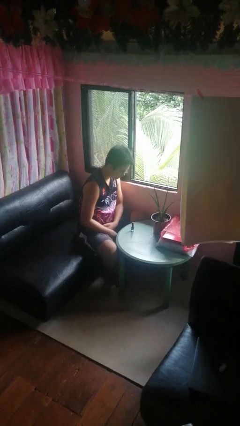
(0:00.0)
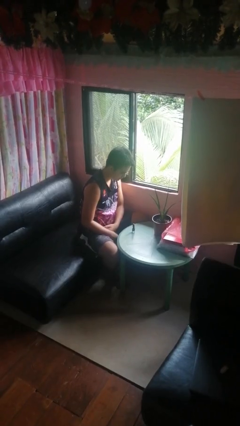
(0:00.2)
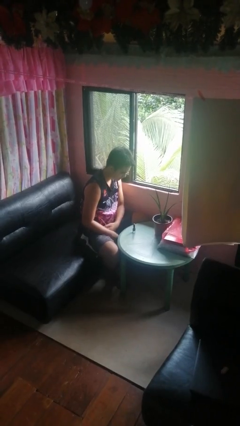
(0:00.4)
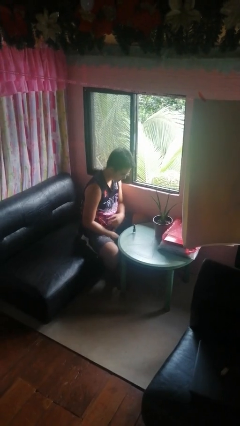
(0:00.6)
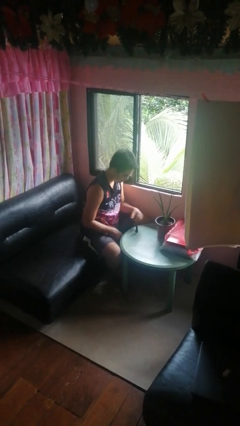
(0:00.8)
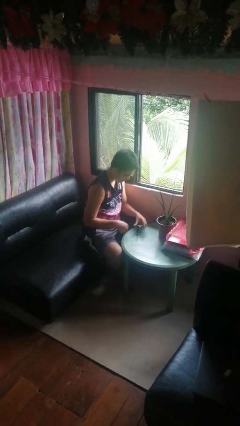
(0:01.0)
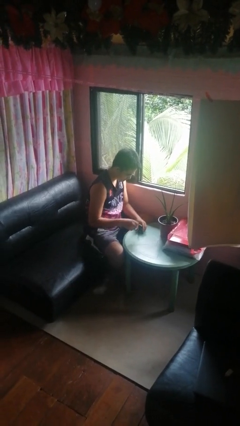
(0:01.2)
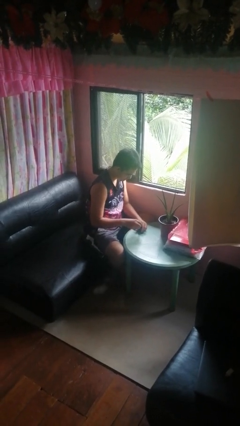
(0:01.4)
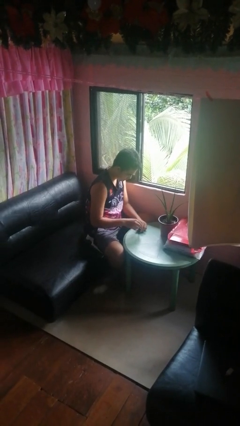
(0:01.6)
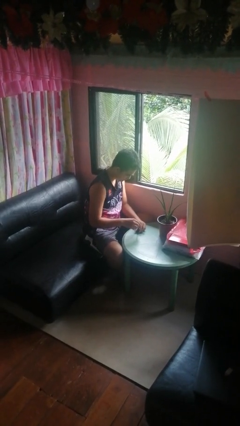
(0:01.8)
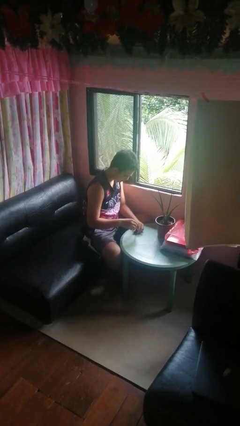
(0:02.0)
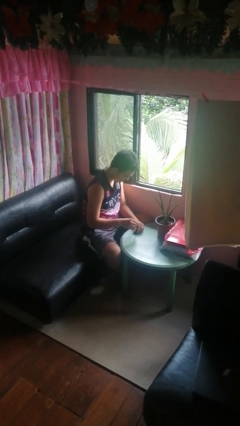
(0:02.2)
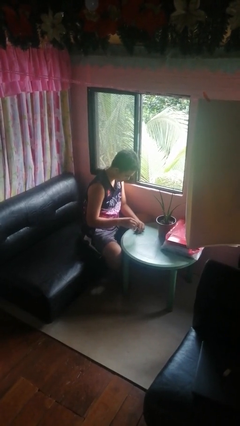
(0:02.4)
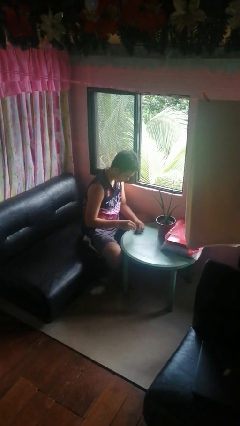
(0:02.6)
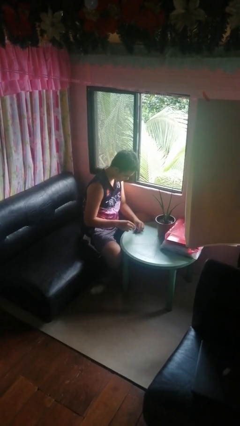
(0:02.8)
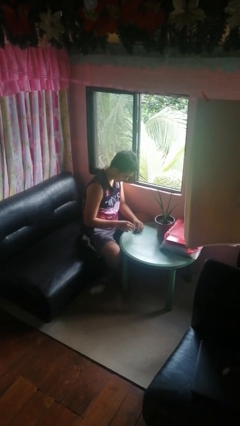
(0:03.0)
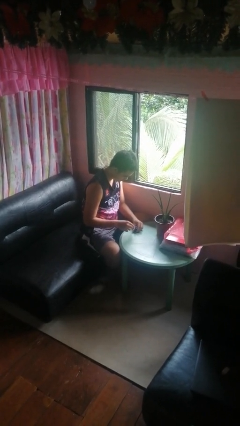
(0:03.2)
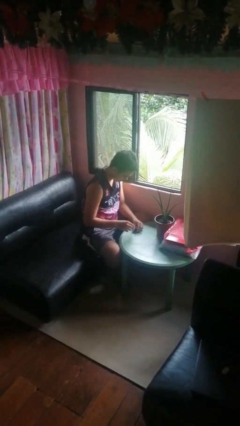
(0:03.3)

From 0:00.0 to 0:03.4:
person paints fingernails

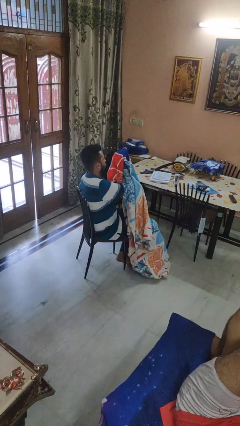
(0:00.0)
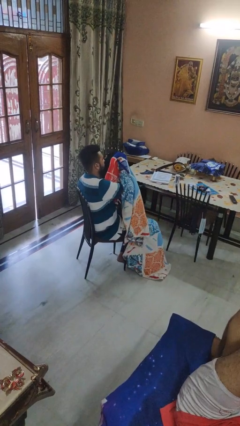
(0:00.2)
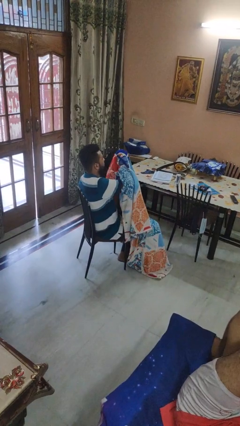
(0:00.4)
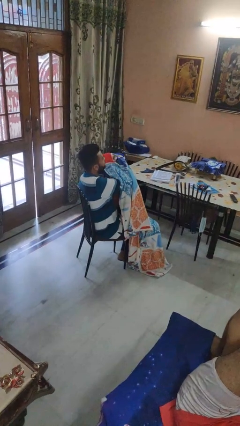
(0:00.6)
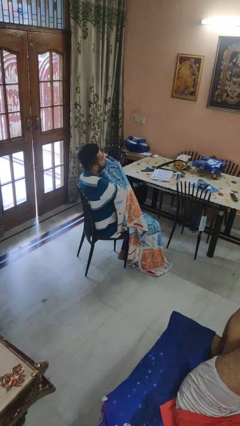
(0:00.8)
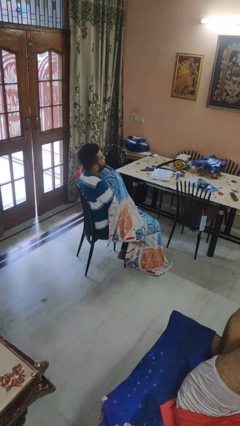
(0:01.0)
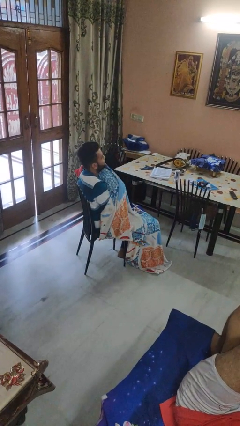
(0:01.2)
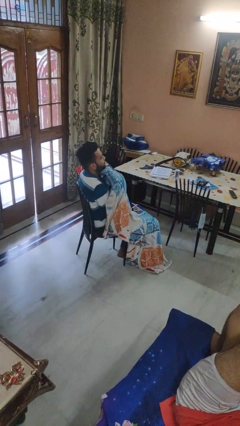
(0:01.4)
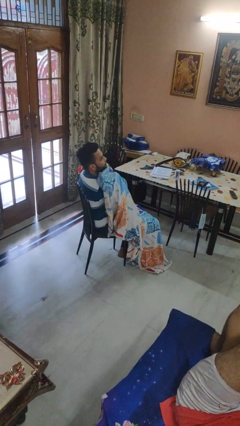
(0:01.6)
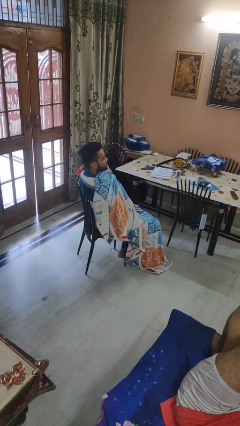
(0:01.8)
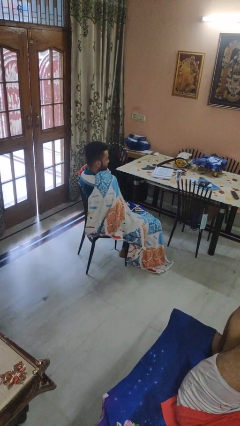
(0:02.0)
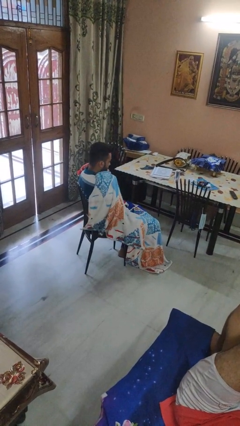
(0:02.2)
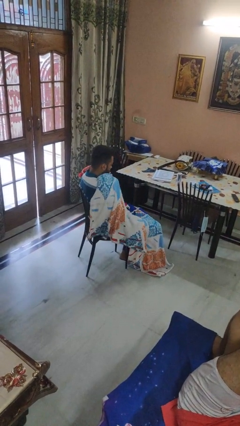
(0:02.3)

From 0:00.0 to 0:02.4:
person covers with blanket

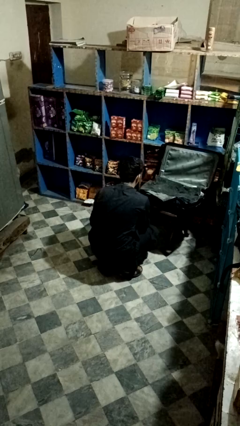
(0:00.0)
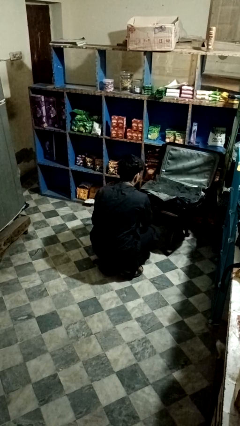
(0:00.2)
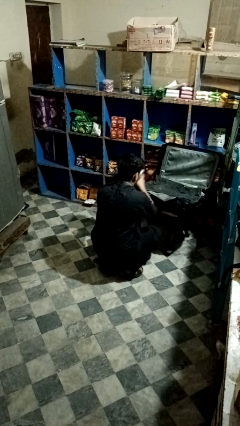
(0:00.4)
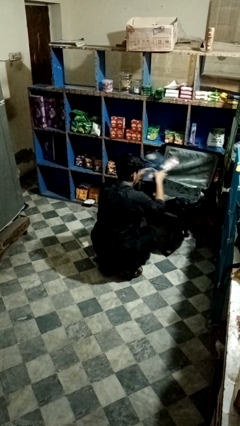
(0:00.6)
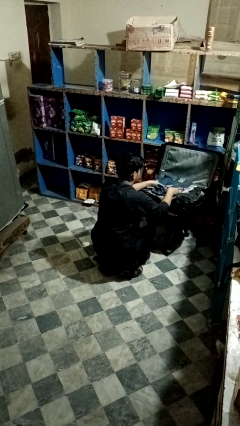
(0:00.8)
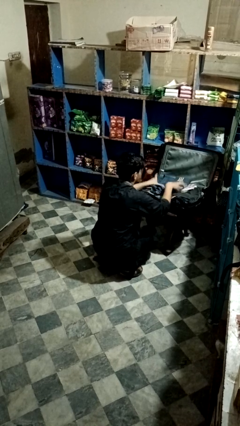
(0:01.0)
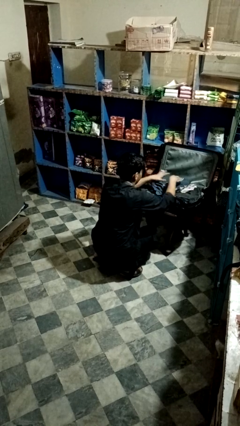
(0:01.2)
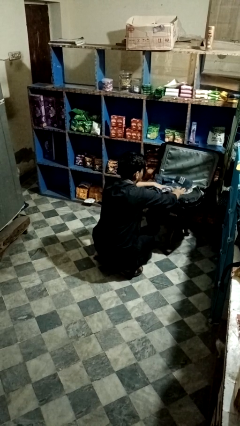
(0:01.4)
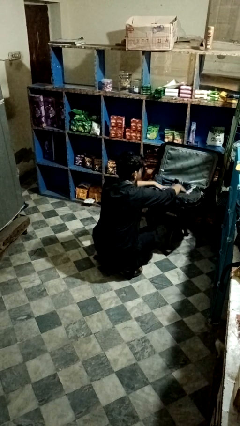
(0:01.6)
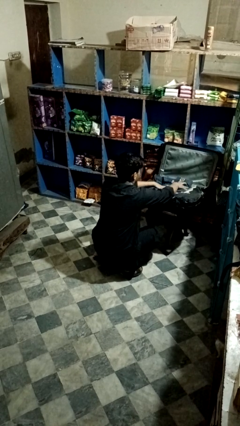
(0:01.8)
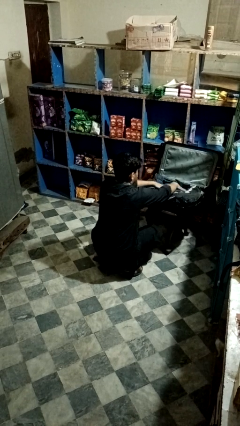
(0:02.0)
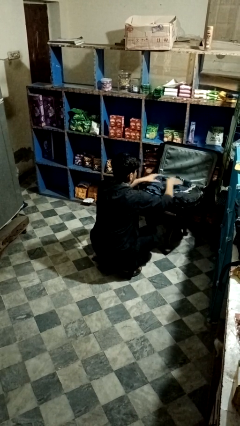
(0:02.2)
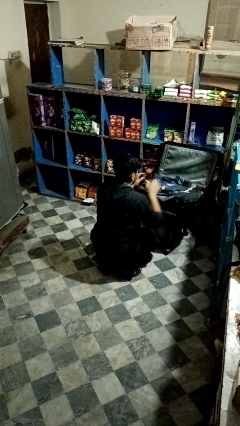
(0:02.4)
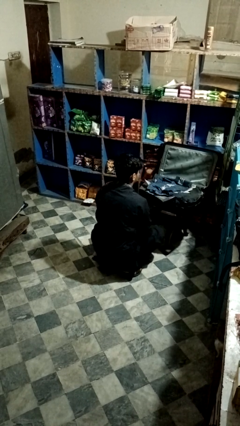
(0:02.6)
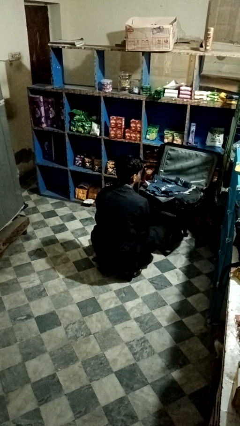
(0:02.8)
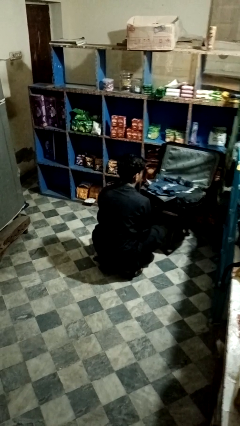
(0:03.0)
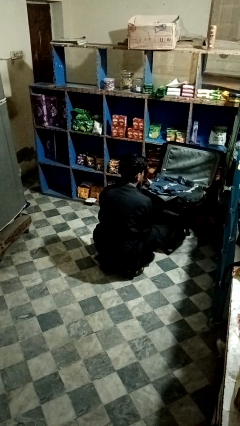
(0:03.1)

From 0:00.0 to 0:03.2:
person loads clothes into suitcase

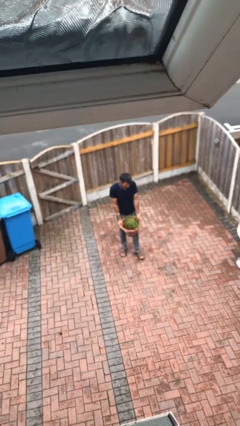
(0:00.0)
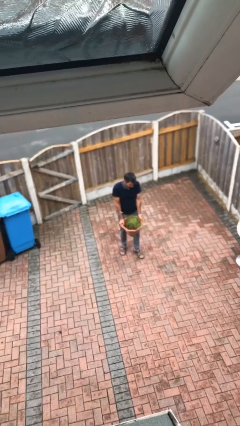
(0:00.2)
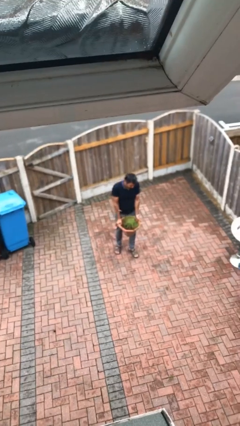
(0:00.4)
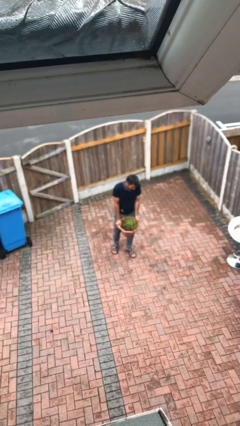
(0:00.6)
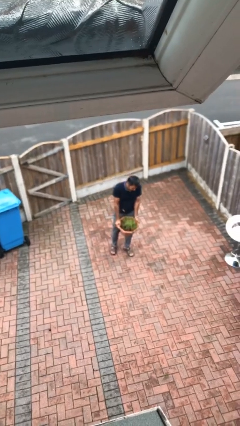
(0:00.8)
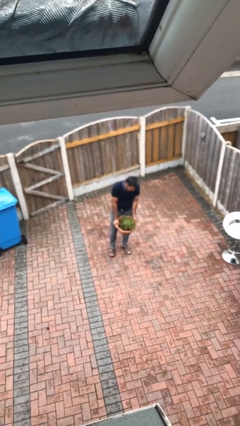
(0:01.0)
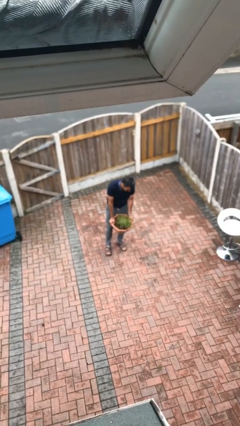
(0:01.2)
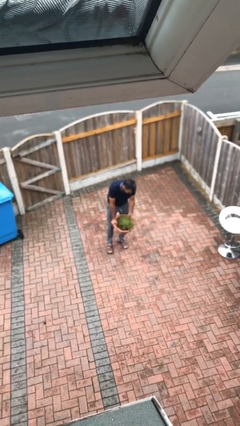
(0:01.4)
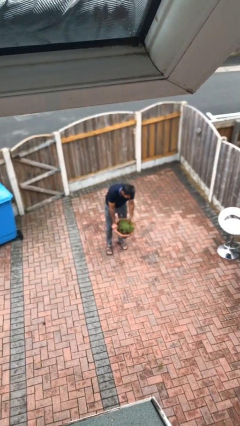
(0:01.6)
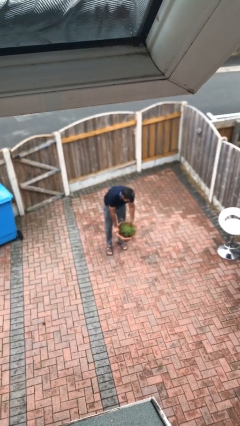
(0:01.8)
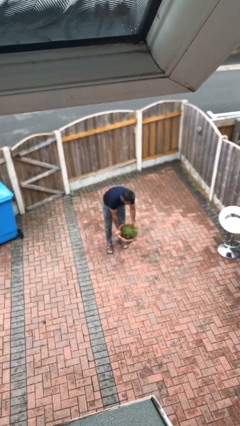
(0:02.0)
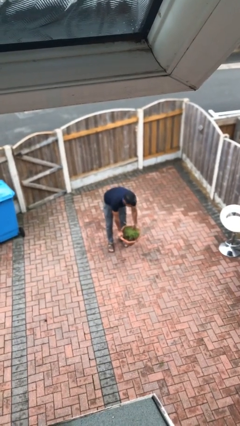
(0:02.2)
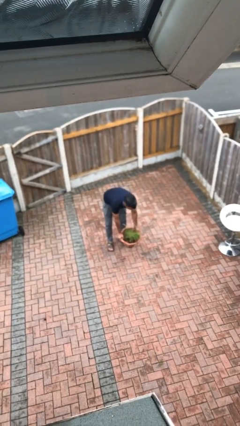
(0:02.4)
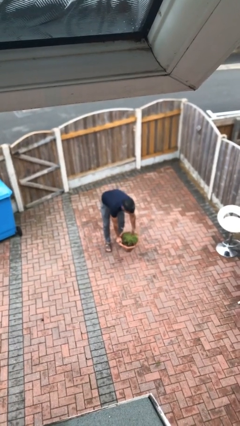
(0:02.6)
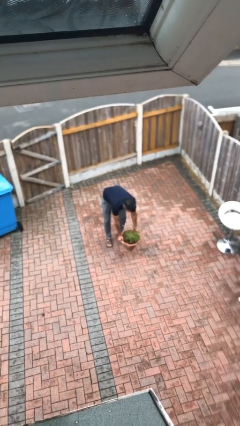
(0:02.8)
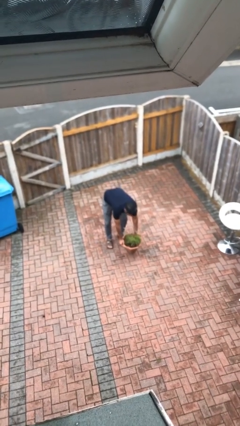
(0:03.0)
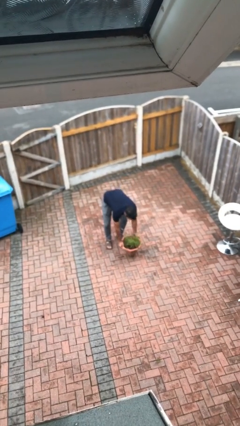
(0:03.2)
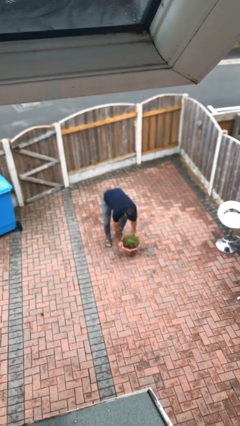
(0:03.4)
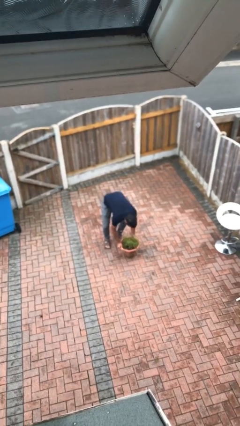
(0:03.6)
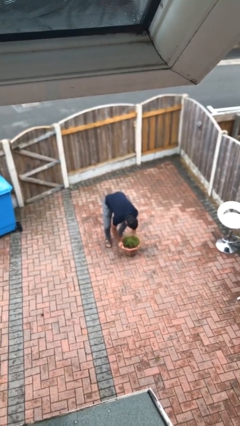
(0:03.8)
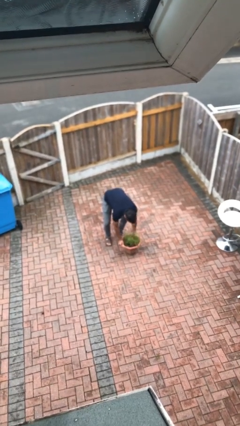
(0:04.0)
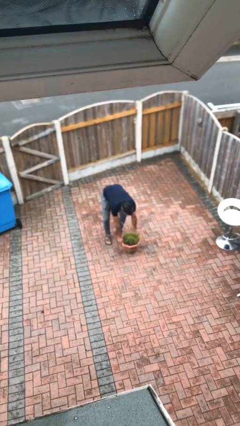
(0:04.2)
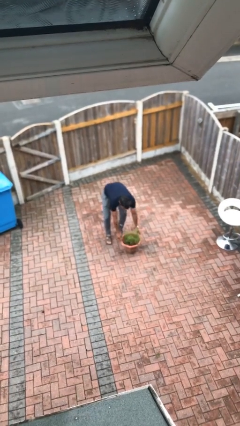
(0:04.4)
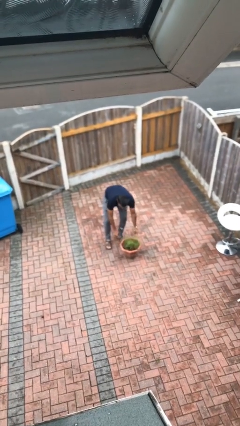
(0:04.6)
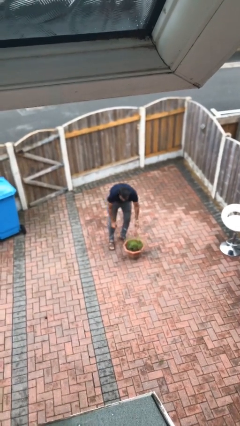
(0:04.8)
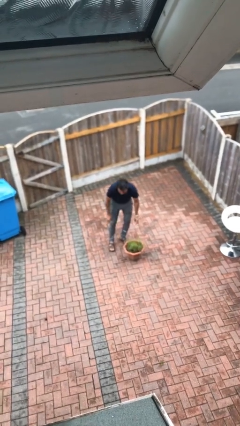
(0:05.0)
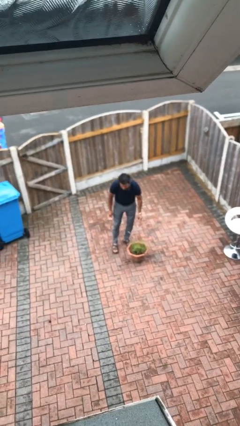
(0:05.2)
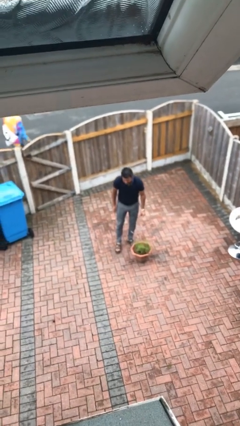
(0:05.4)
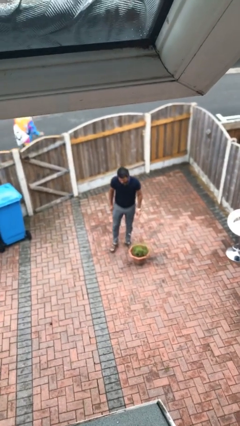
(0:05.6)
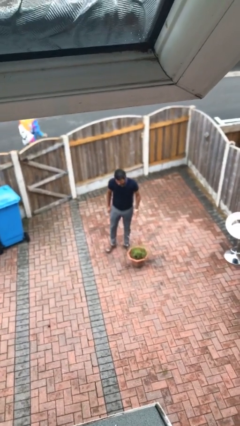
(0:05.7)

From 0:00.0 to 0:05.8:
person puts down object on floor

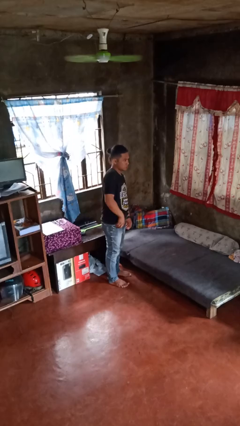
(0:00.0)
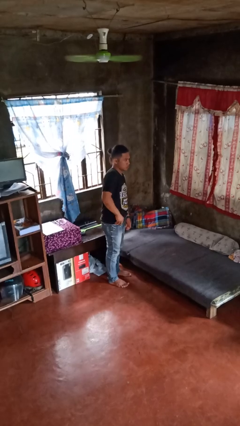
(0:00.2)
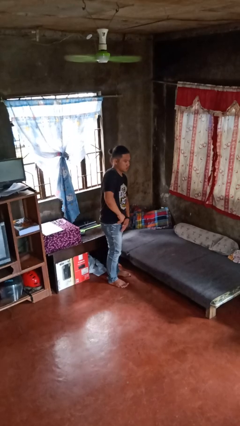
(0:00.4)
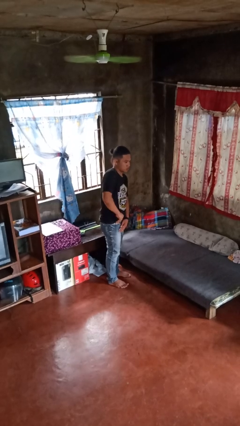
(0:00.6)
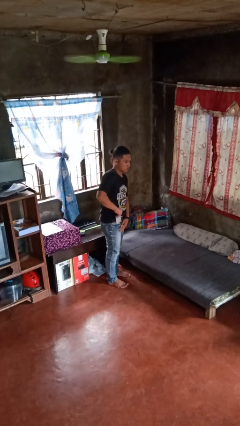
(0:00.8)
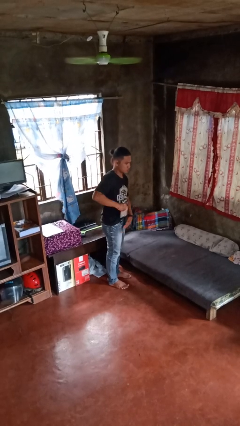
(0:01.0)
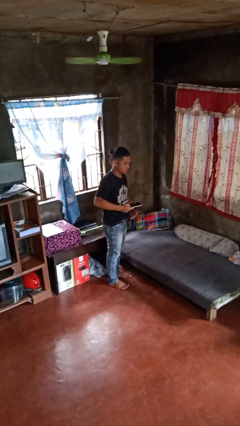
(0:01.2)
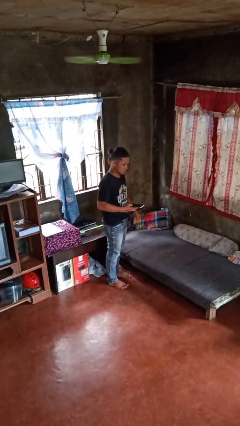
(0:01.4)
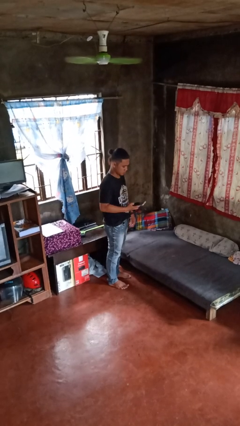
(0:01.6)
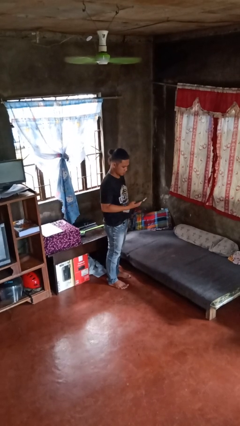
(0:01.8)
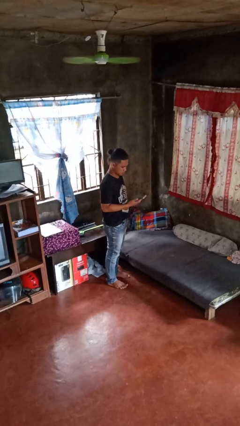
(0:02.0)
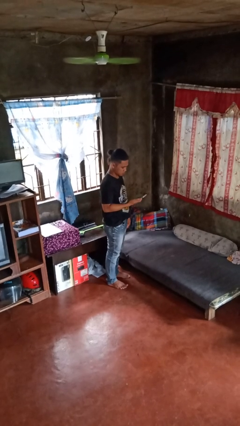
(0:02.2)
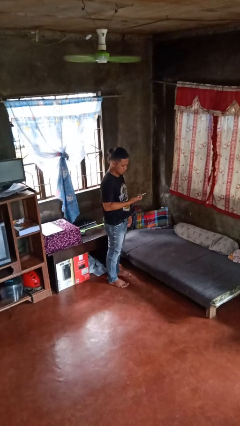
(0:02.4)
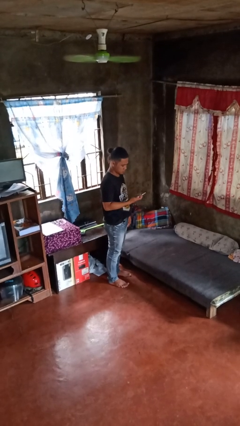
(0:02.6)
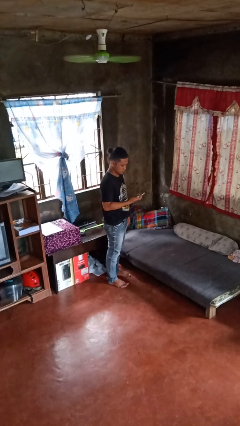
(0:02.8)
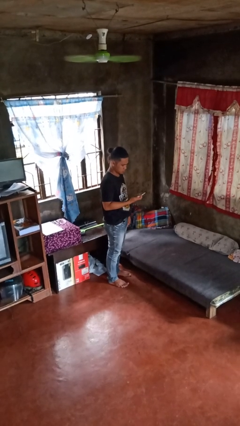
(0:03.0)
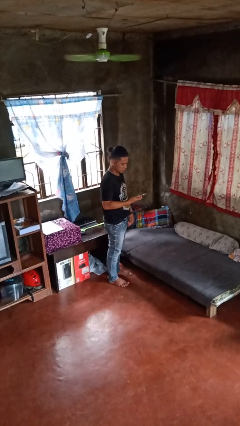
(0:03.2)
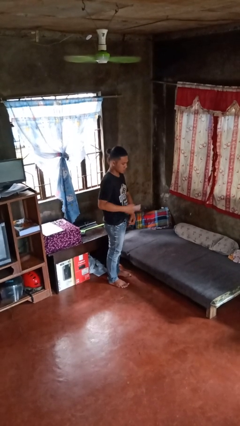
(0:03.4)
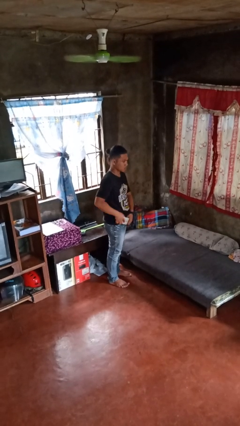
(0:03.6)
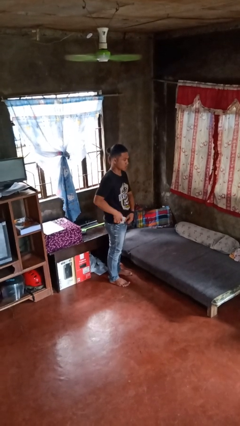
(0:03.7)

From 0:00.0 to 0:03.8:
person takes phone from pocket
